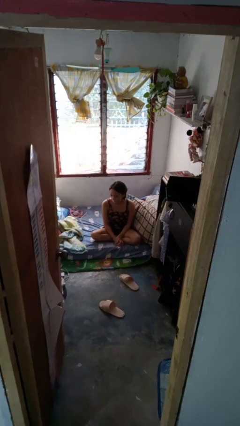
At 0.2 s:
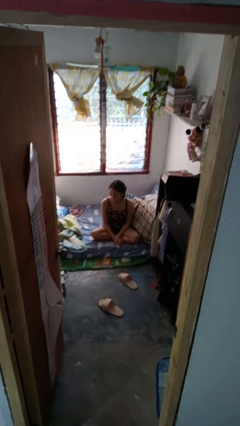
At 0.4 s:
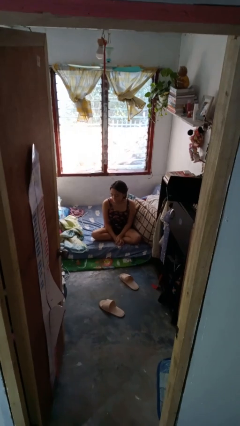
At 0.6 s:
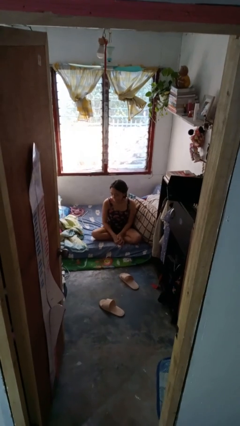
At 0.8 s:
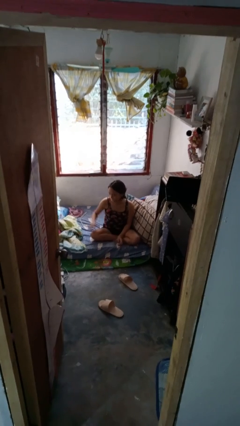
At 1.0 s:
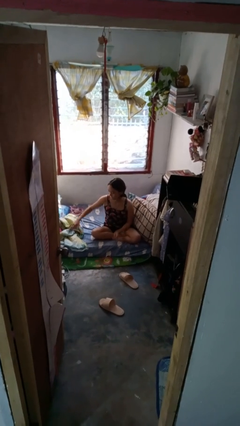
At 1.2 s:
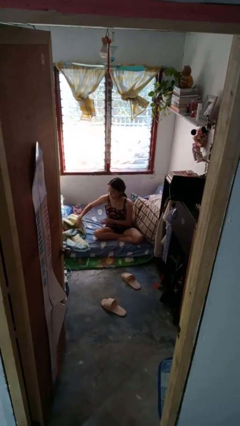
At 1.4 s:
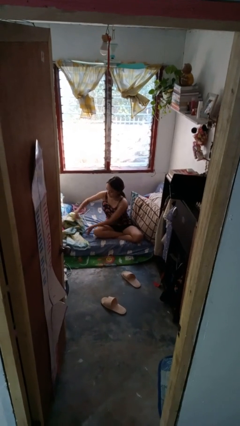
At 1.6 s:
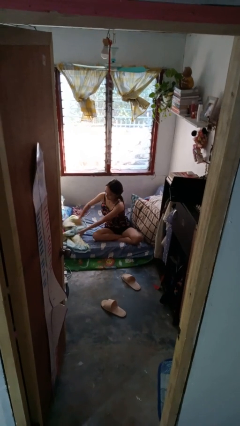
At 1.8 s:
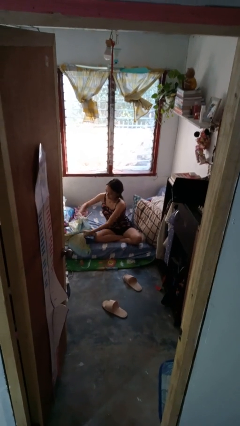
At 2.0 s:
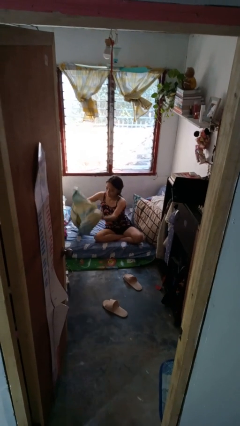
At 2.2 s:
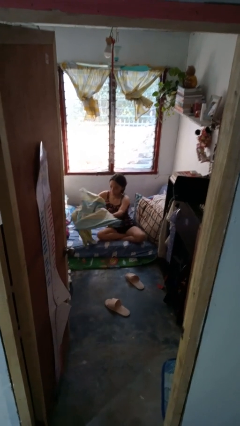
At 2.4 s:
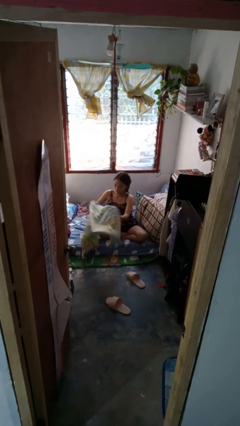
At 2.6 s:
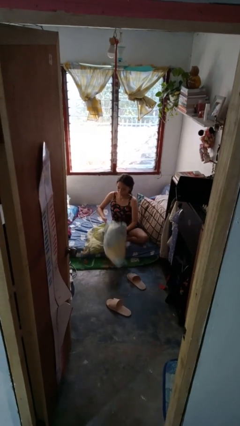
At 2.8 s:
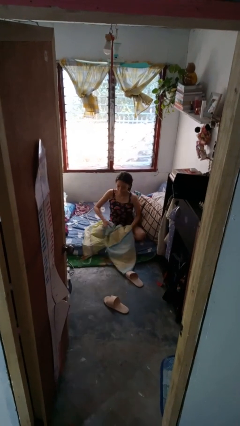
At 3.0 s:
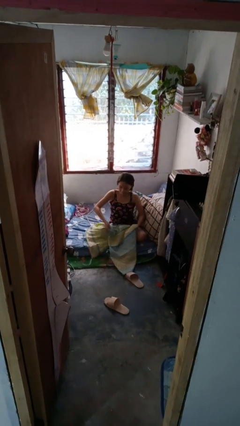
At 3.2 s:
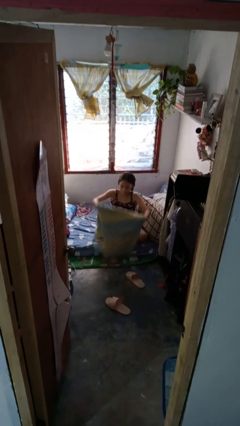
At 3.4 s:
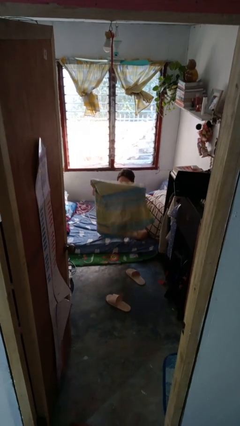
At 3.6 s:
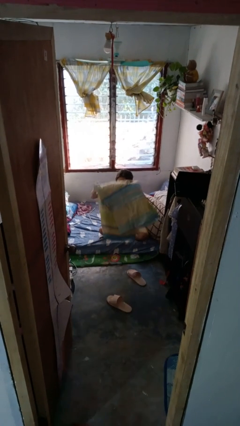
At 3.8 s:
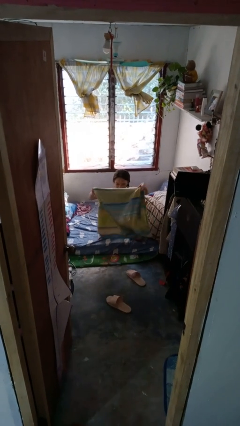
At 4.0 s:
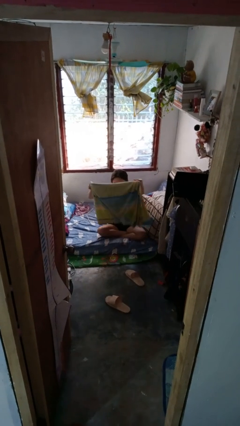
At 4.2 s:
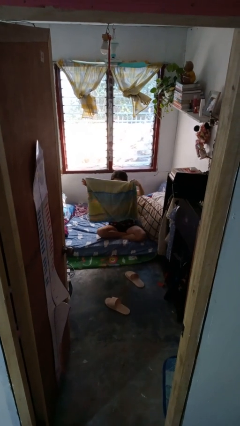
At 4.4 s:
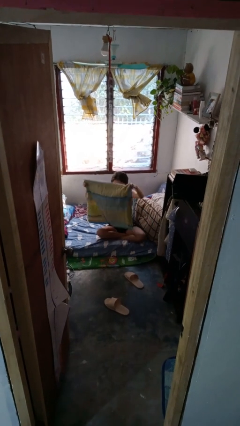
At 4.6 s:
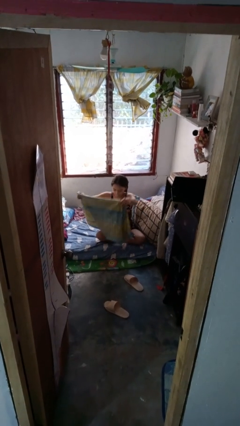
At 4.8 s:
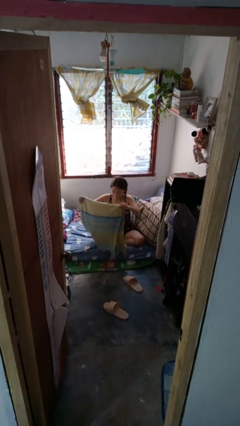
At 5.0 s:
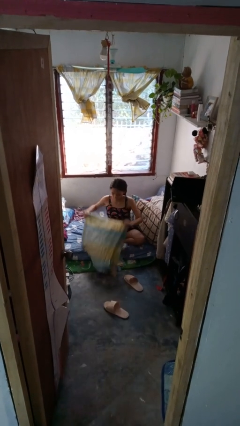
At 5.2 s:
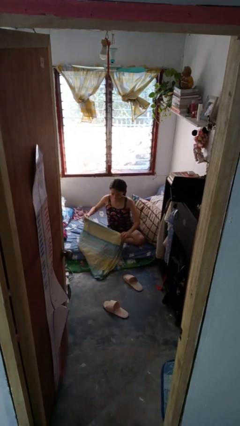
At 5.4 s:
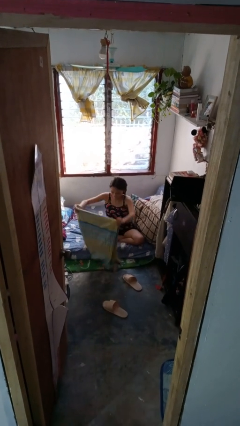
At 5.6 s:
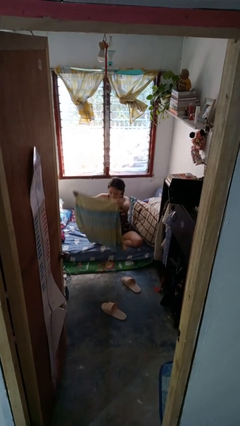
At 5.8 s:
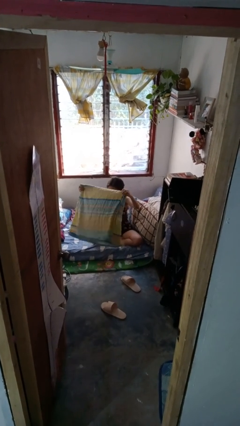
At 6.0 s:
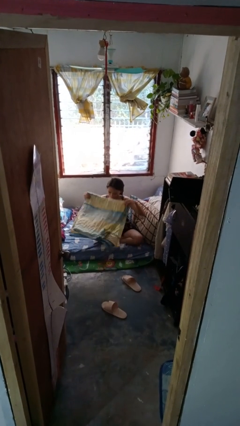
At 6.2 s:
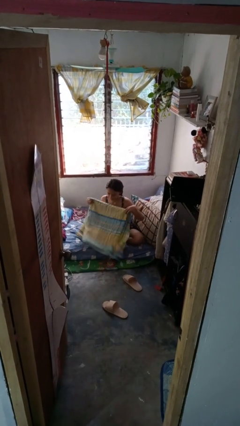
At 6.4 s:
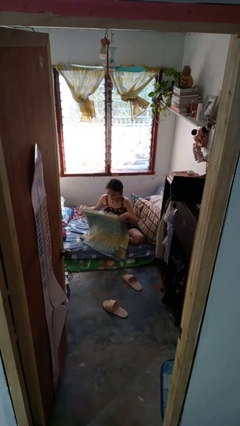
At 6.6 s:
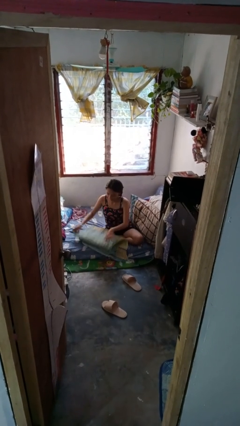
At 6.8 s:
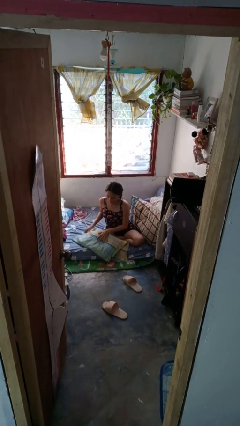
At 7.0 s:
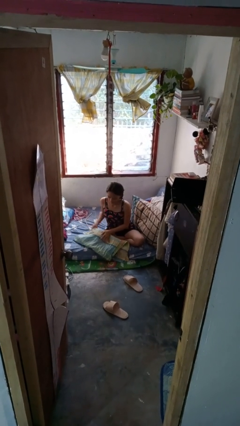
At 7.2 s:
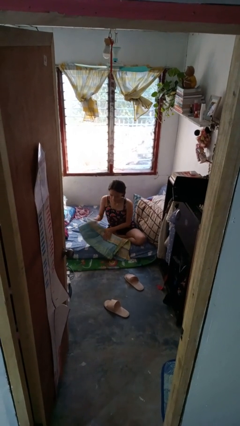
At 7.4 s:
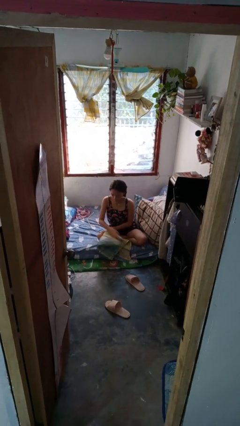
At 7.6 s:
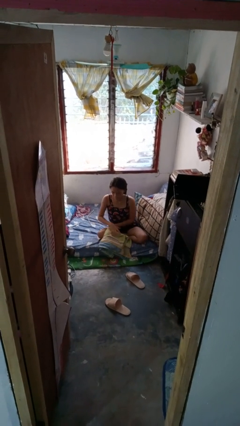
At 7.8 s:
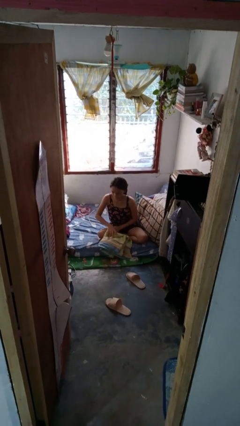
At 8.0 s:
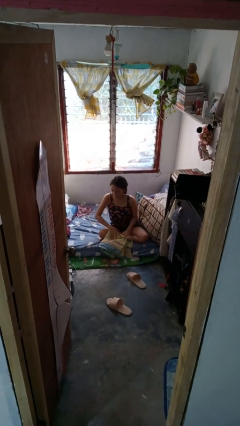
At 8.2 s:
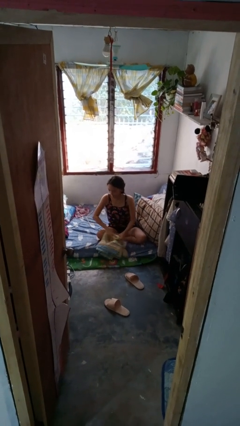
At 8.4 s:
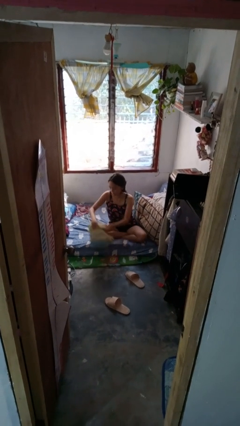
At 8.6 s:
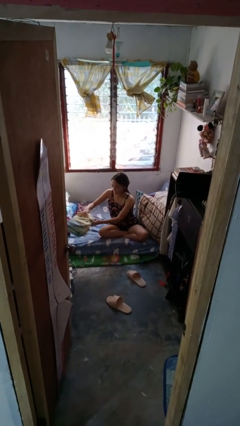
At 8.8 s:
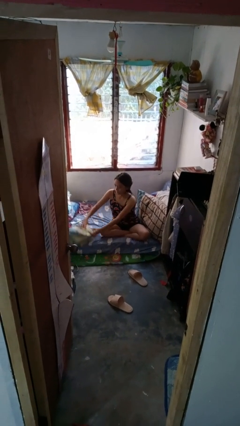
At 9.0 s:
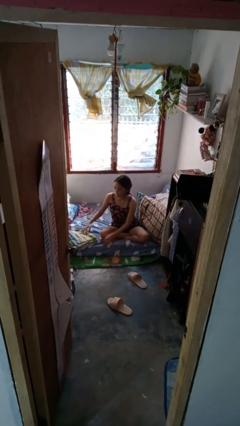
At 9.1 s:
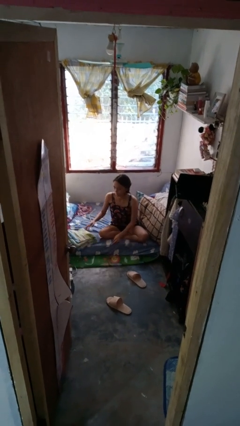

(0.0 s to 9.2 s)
person folds blanket

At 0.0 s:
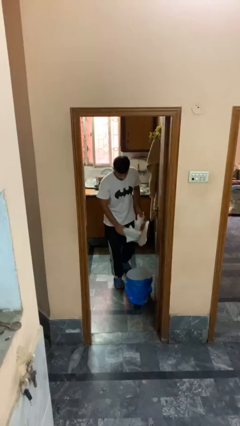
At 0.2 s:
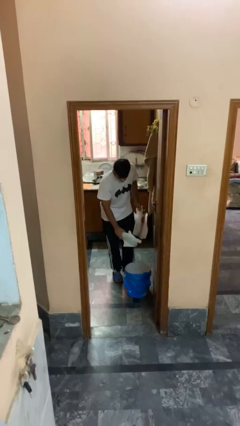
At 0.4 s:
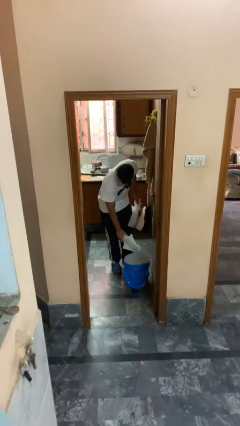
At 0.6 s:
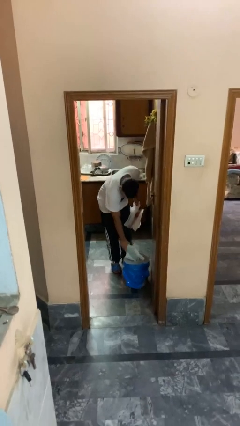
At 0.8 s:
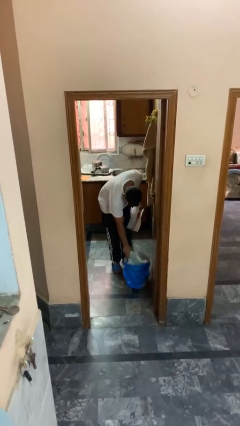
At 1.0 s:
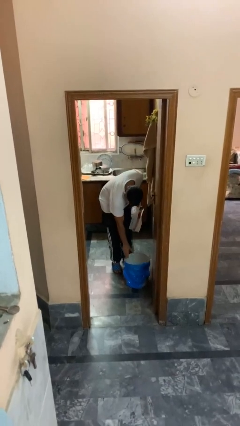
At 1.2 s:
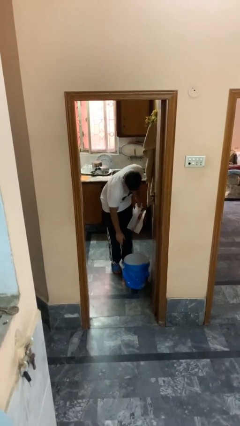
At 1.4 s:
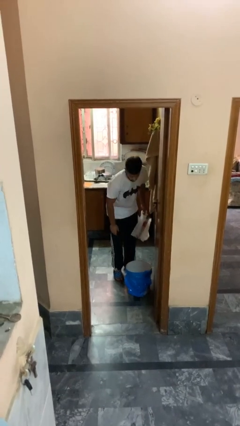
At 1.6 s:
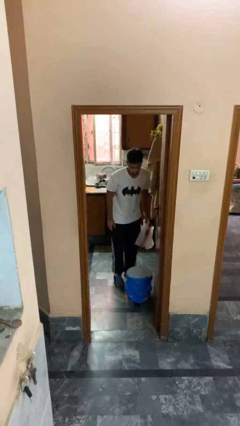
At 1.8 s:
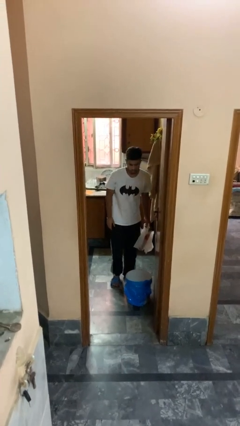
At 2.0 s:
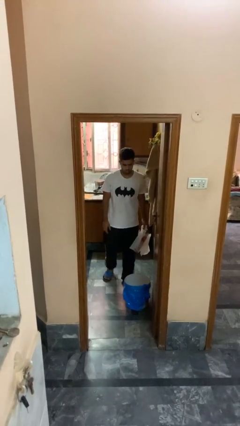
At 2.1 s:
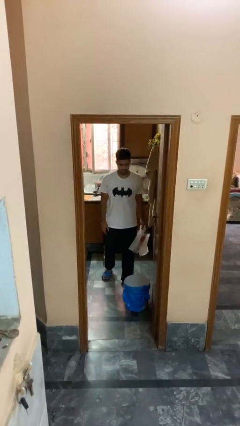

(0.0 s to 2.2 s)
person discards trash

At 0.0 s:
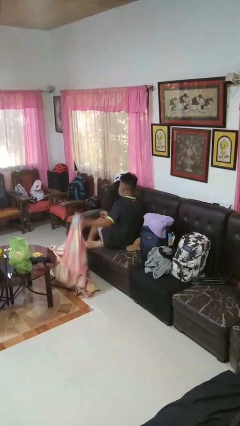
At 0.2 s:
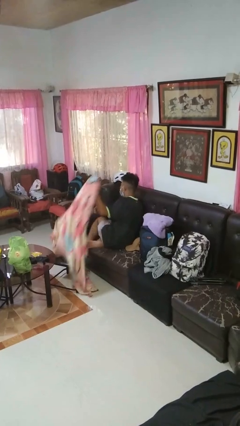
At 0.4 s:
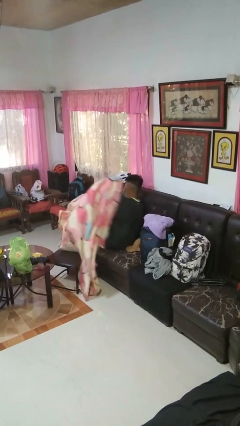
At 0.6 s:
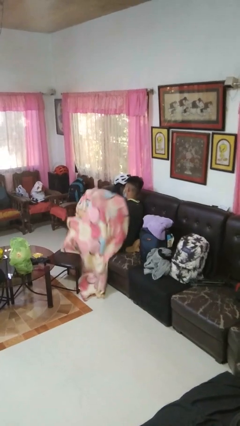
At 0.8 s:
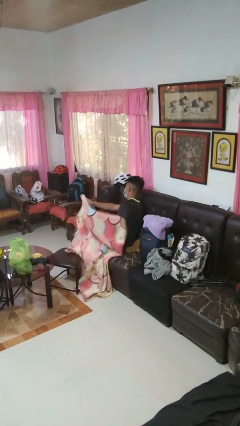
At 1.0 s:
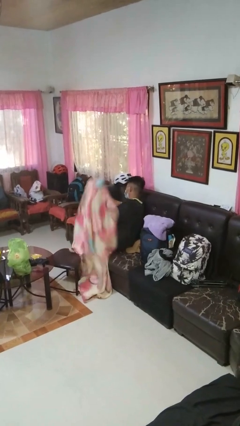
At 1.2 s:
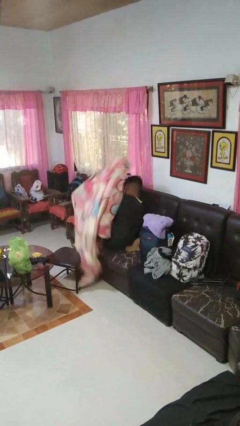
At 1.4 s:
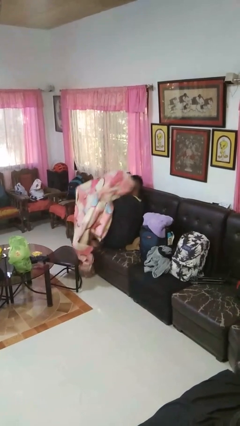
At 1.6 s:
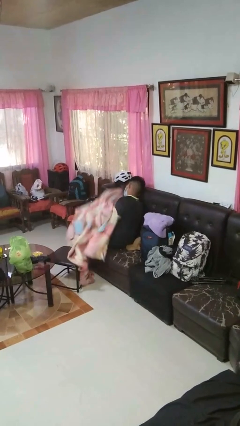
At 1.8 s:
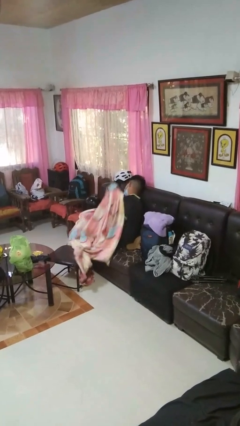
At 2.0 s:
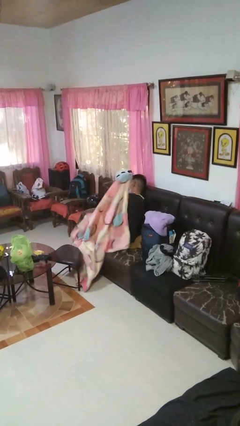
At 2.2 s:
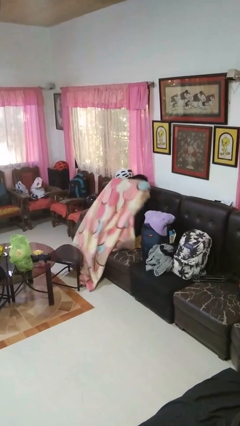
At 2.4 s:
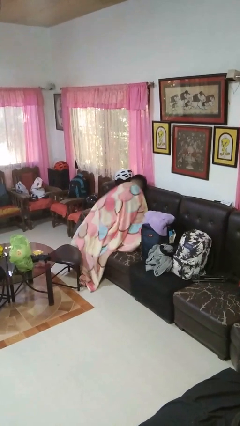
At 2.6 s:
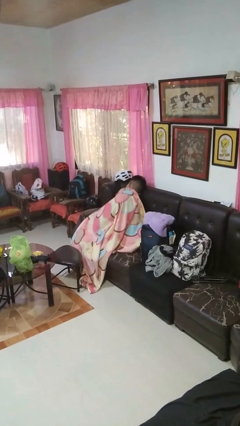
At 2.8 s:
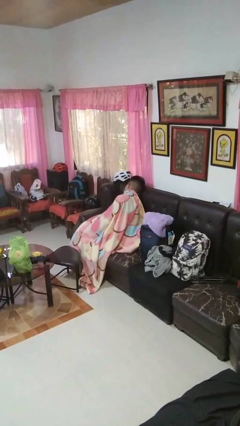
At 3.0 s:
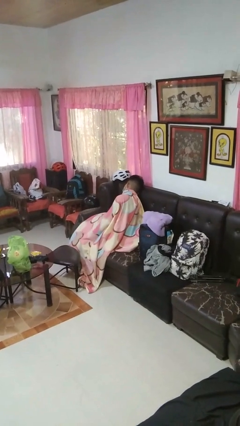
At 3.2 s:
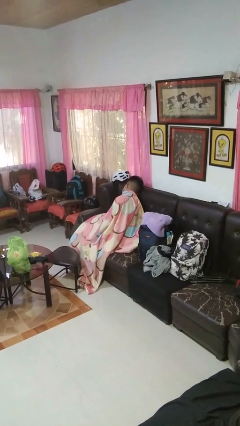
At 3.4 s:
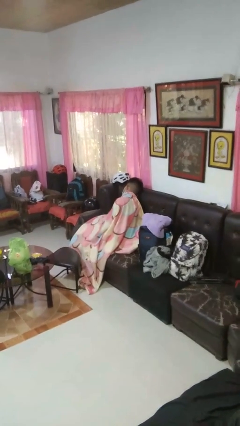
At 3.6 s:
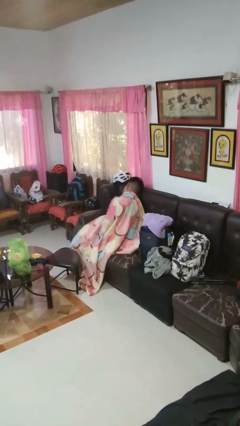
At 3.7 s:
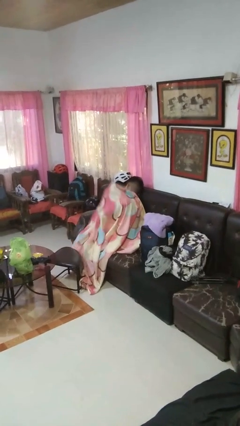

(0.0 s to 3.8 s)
person covers with blanket

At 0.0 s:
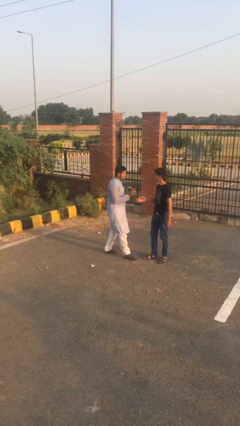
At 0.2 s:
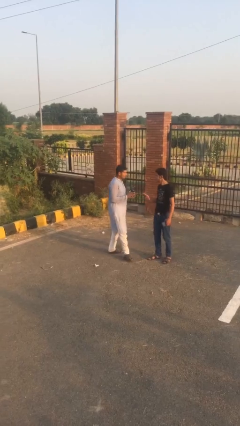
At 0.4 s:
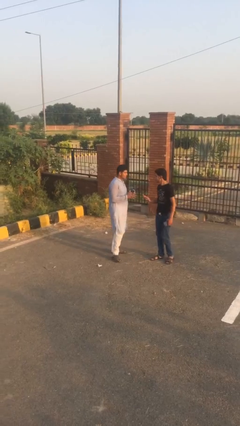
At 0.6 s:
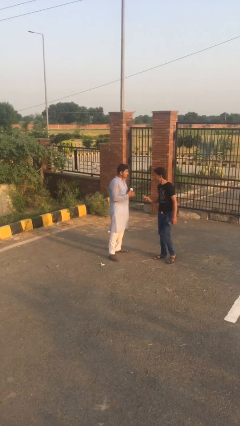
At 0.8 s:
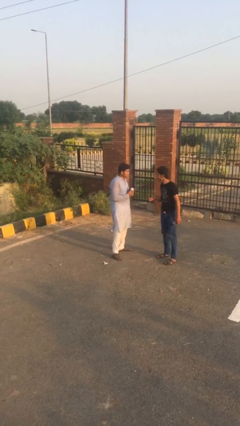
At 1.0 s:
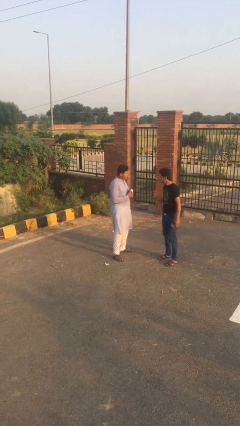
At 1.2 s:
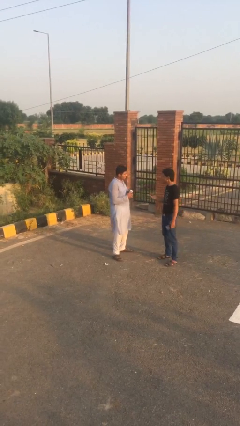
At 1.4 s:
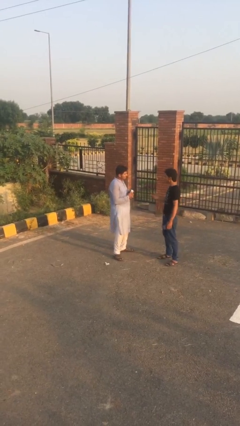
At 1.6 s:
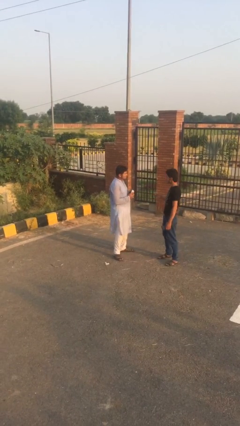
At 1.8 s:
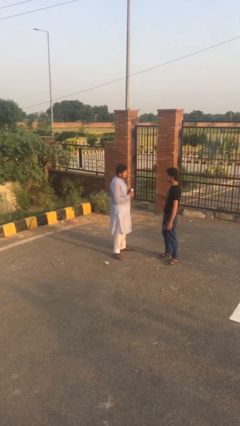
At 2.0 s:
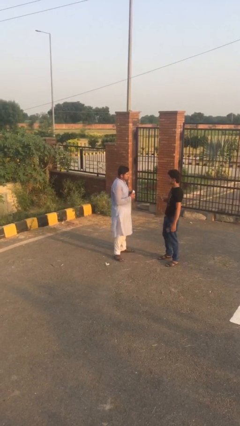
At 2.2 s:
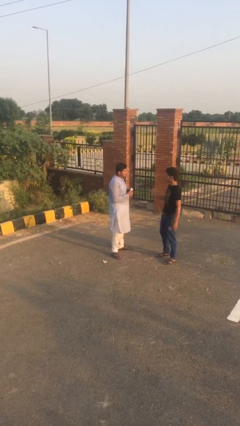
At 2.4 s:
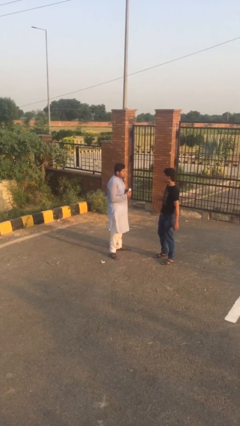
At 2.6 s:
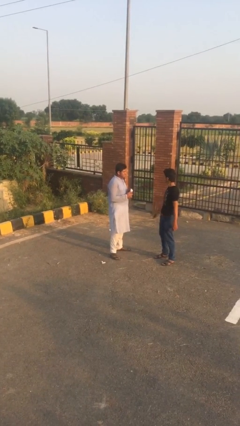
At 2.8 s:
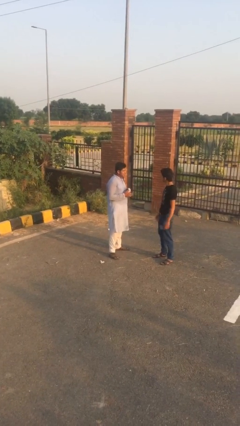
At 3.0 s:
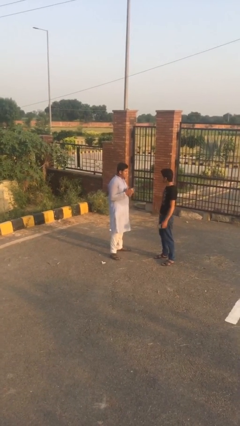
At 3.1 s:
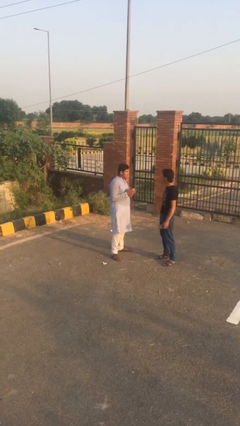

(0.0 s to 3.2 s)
person talks to person
